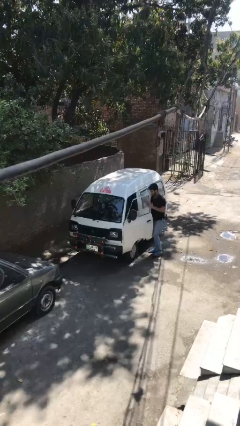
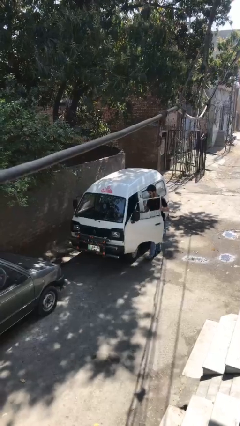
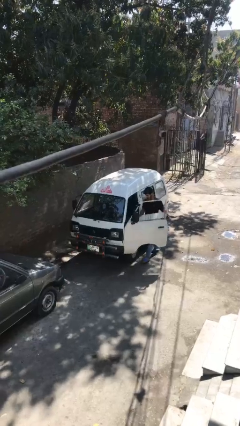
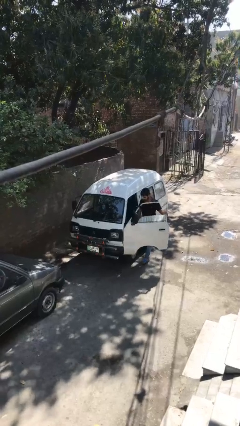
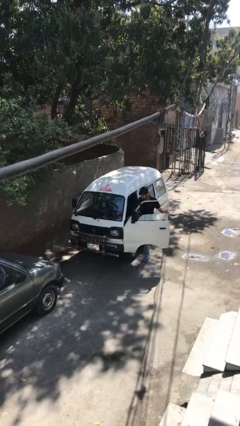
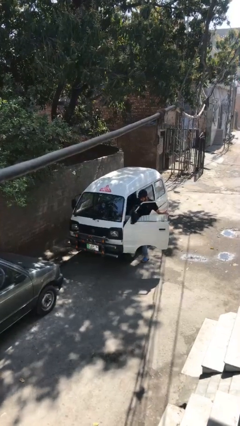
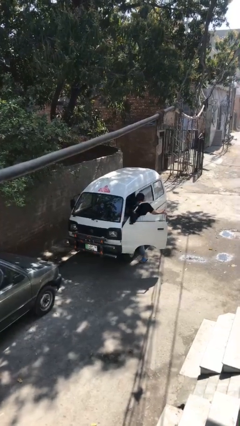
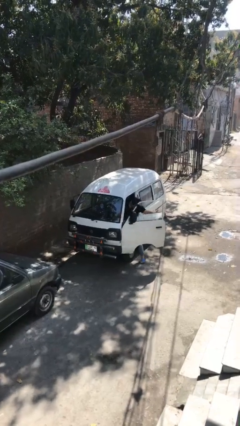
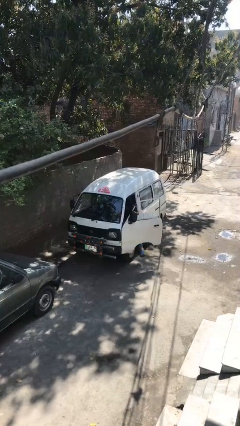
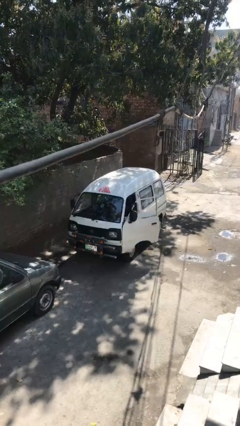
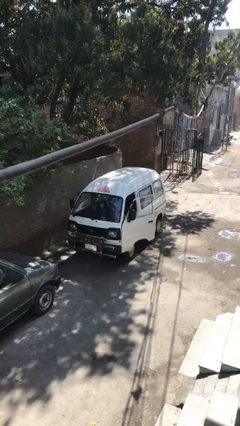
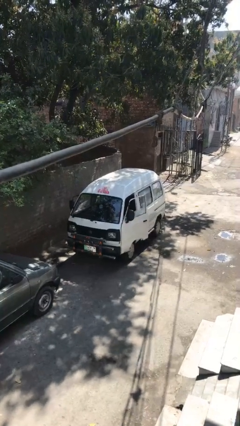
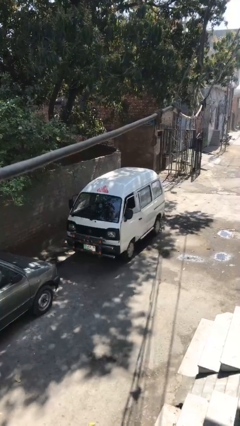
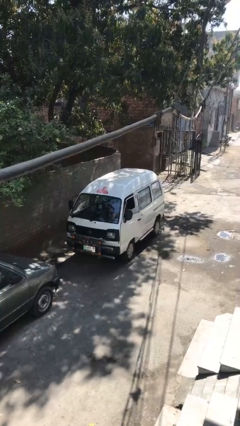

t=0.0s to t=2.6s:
car picks up person

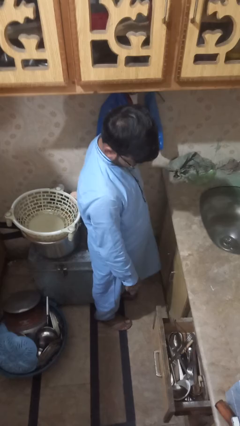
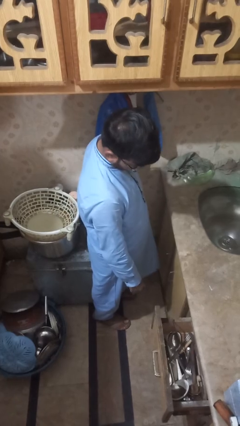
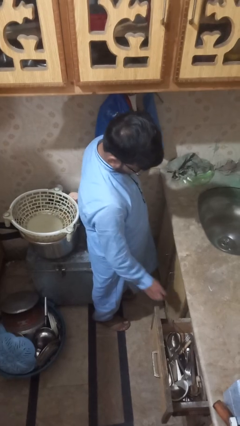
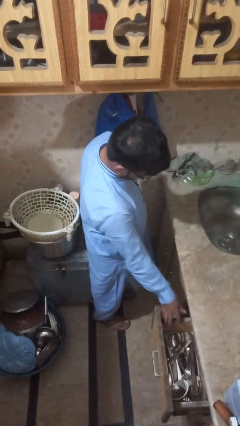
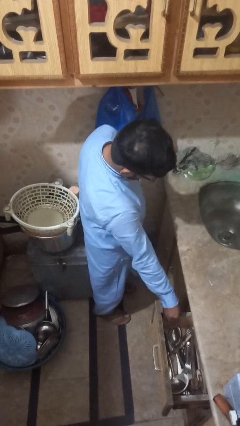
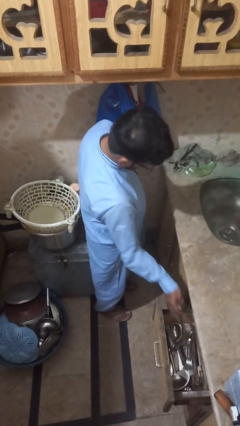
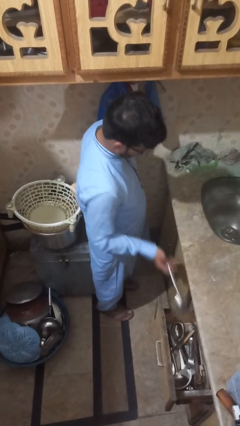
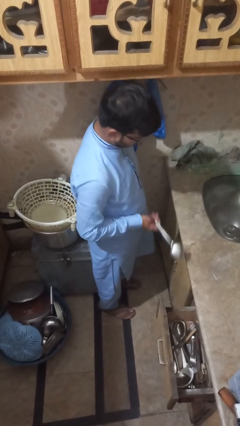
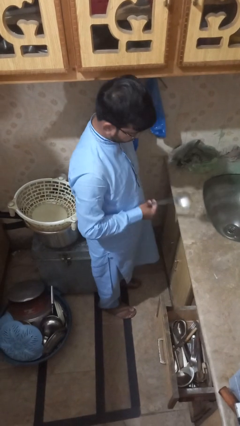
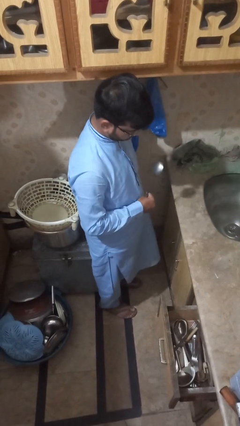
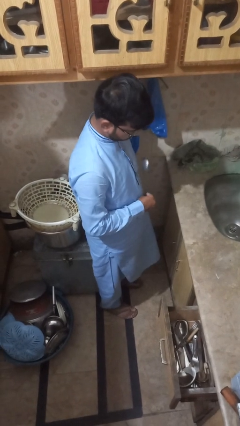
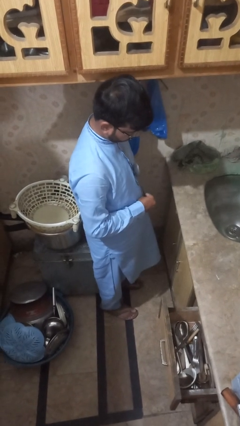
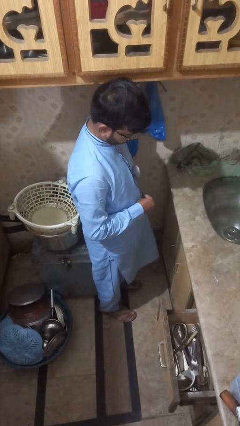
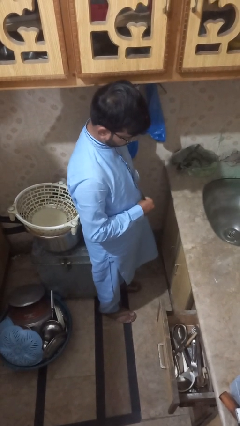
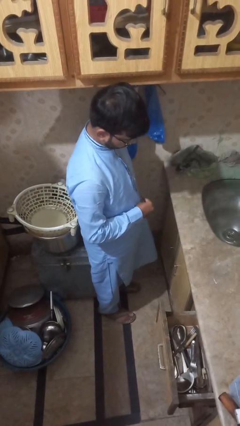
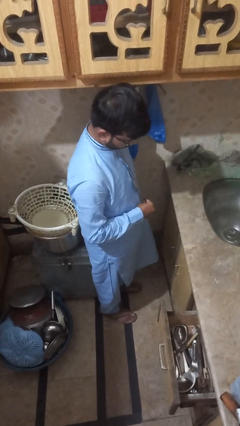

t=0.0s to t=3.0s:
person takes object from kitchen drawer

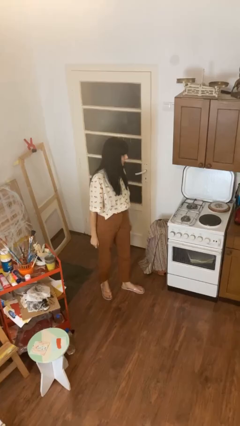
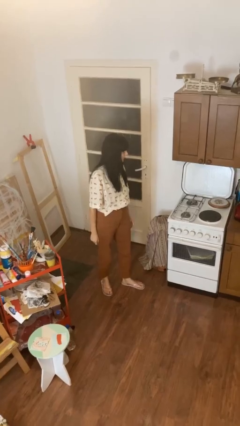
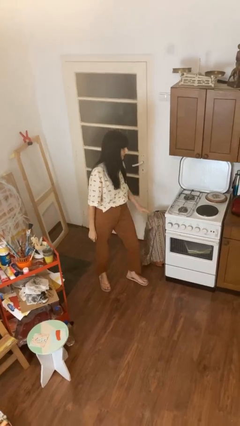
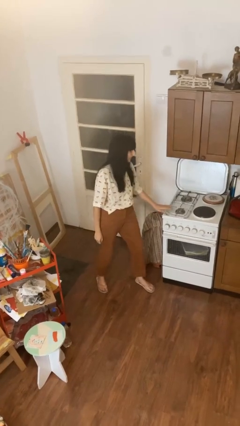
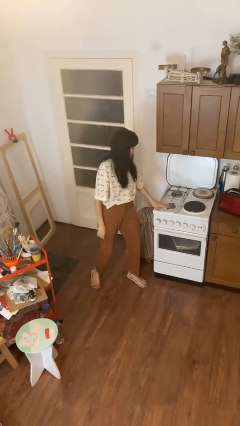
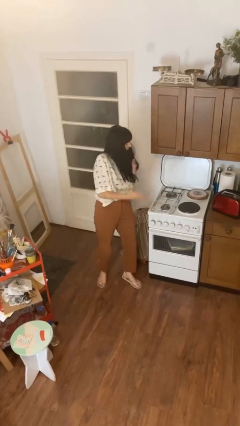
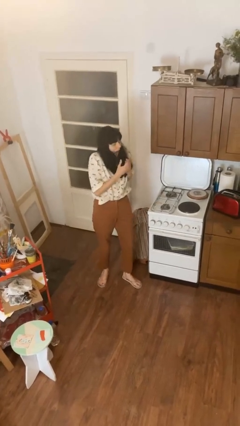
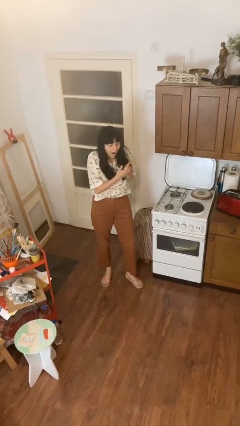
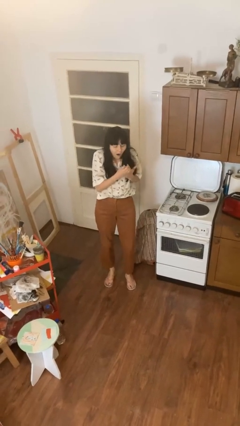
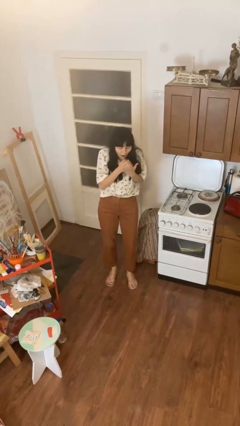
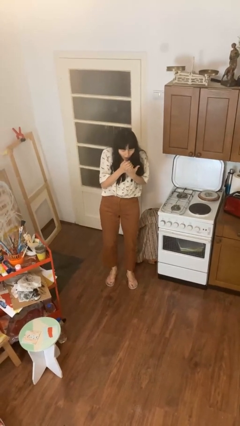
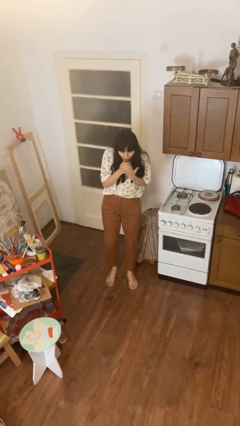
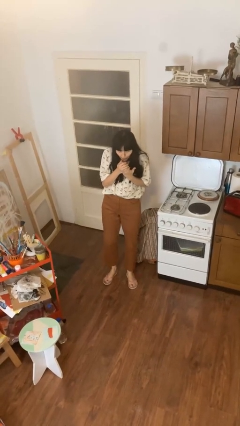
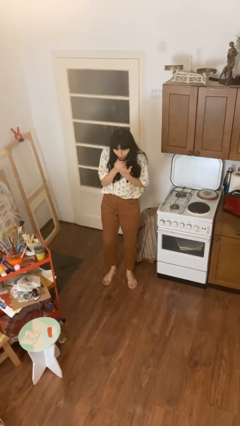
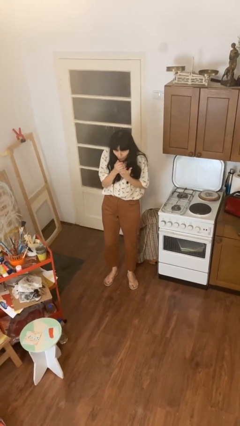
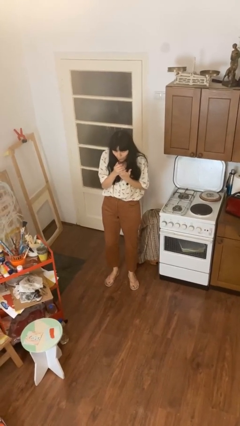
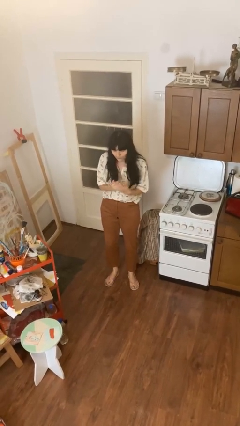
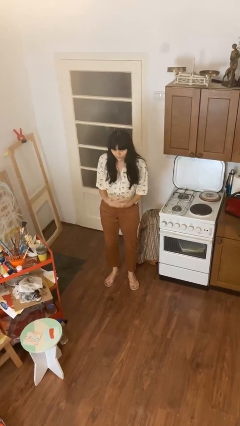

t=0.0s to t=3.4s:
person burns hand

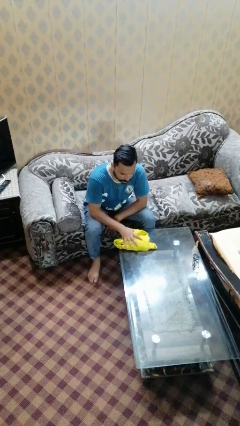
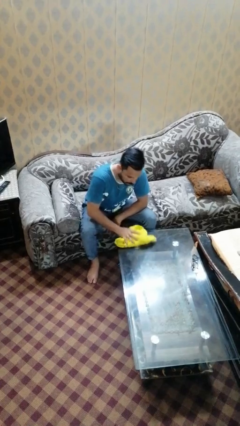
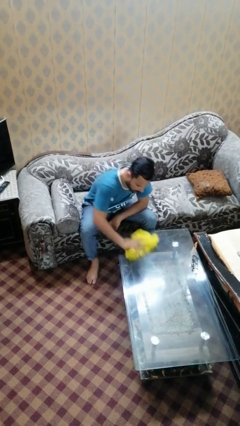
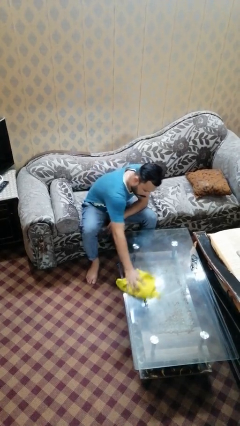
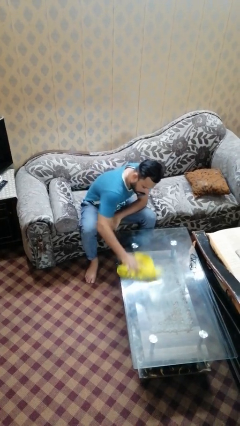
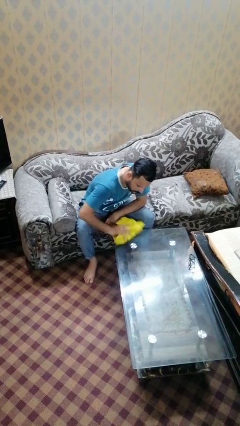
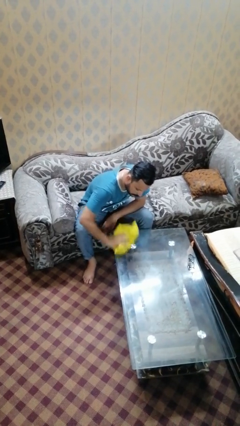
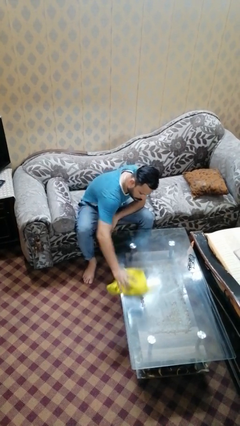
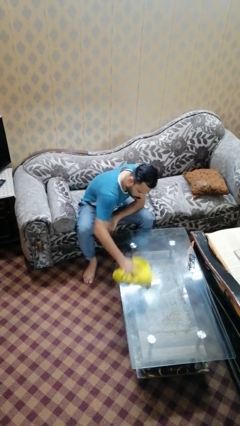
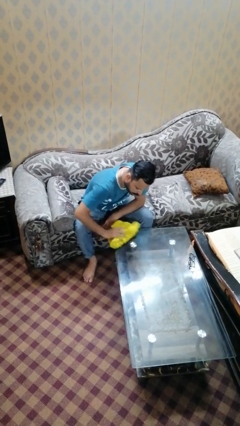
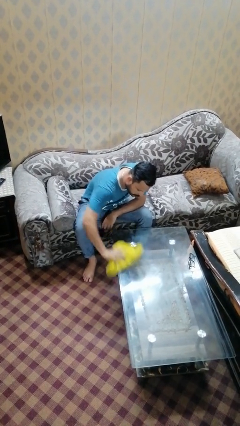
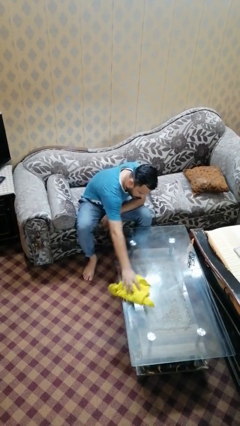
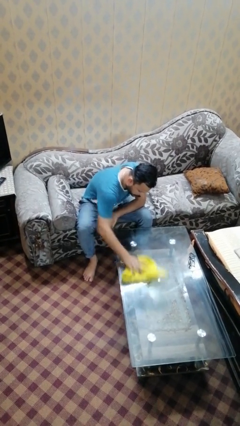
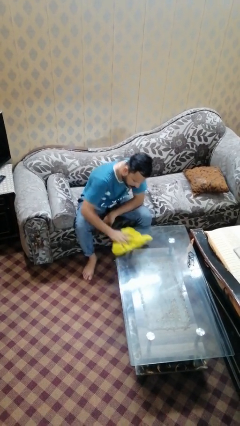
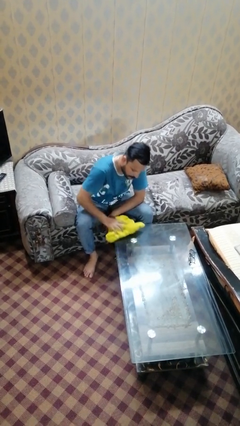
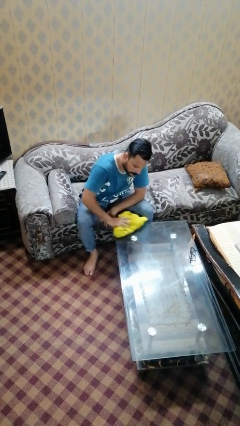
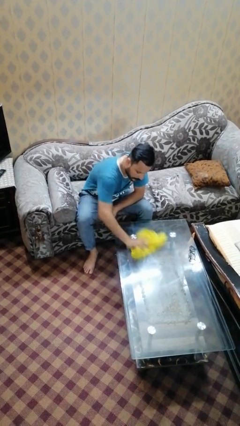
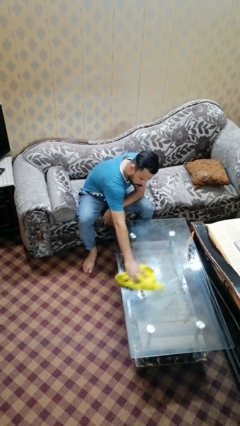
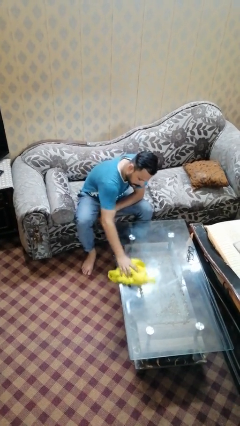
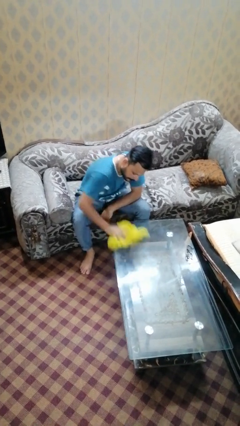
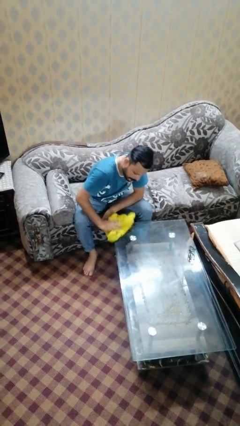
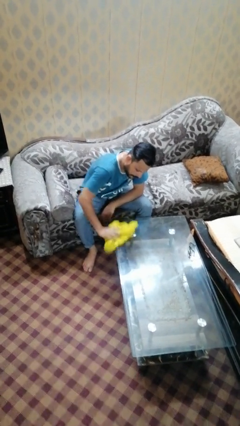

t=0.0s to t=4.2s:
person cleans table with rag

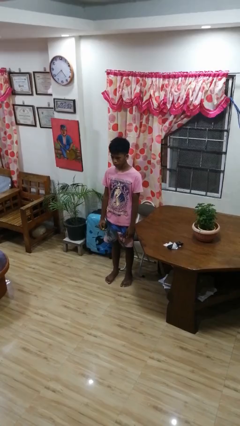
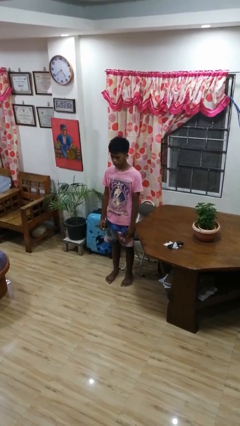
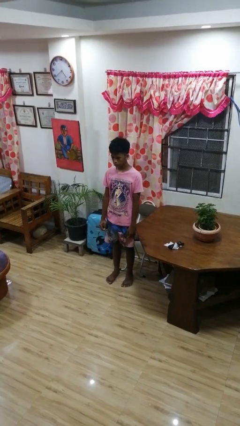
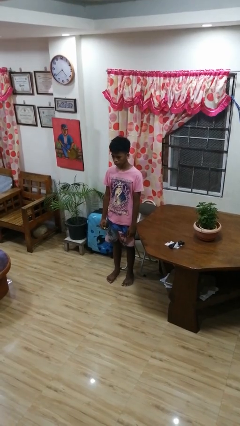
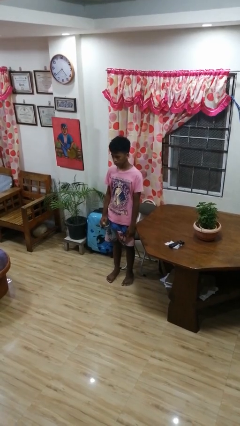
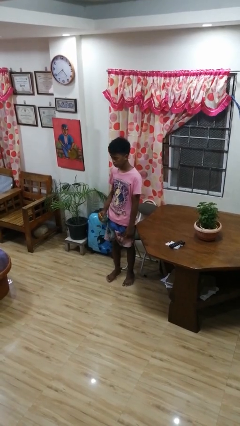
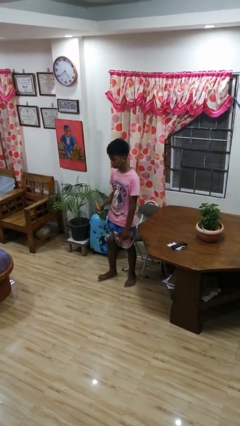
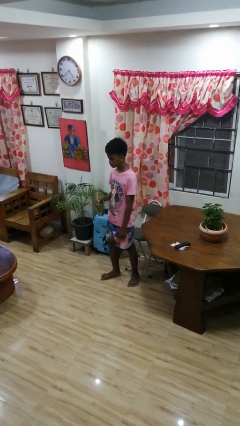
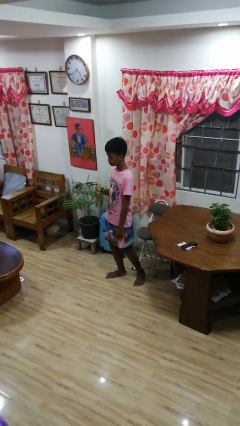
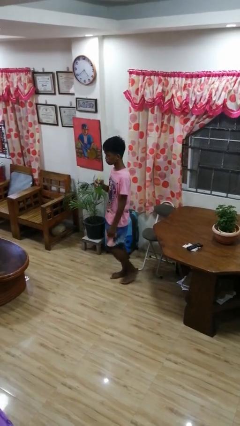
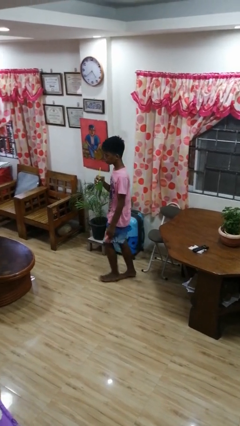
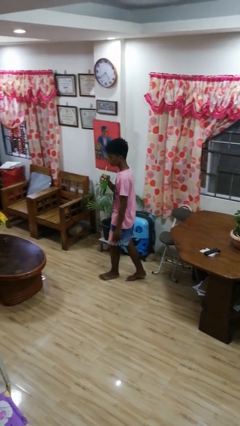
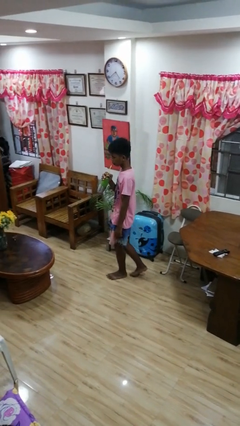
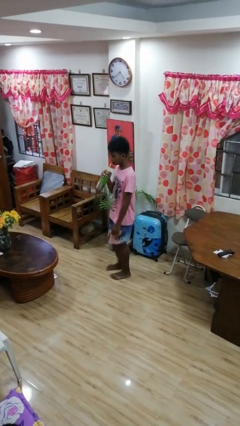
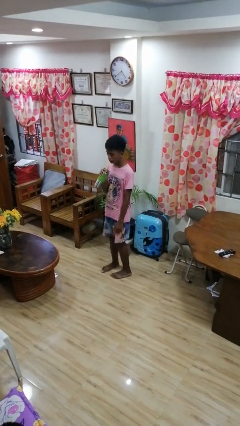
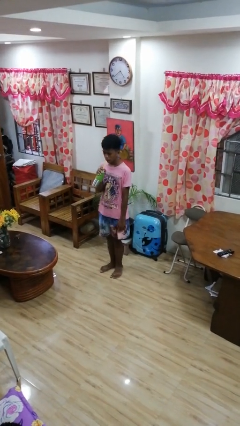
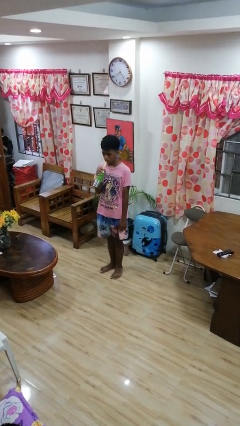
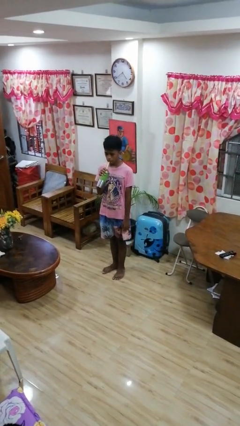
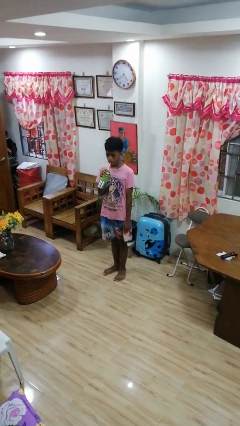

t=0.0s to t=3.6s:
person drinks from straw

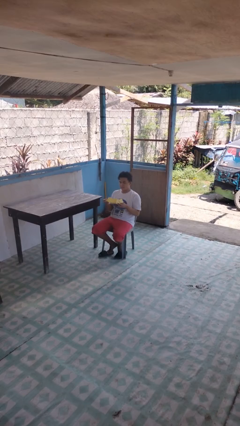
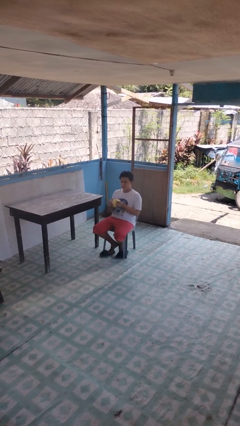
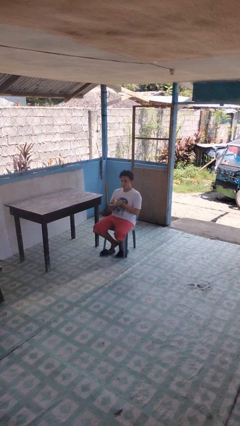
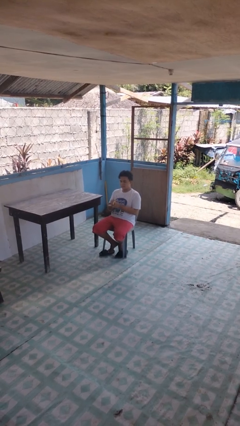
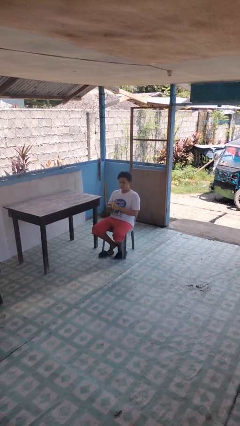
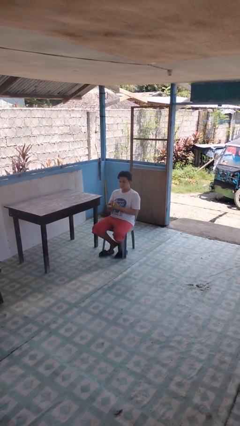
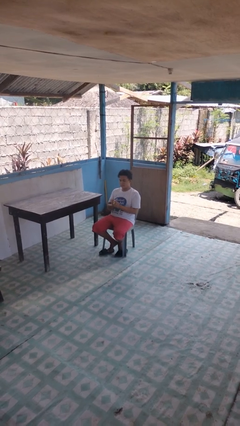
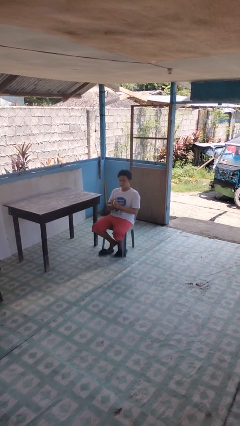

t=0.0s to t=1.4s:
person crumples paper
